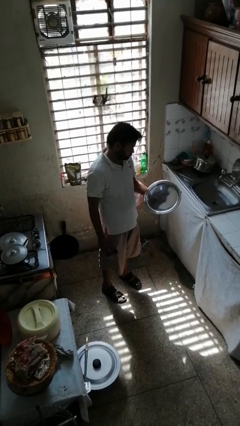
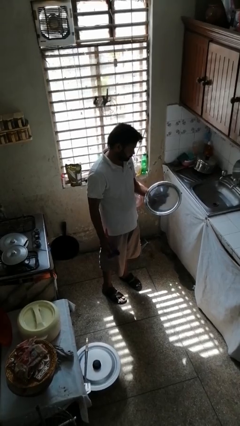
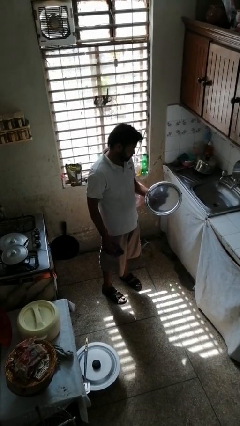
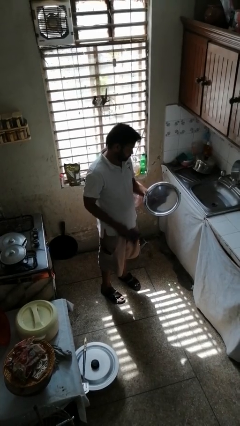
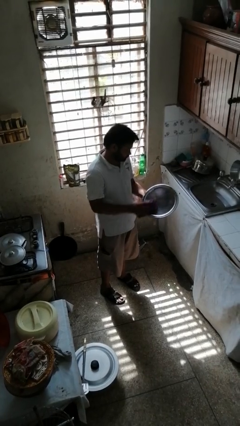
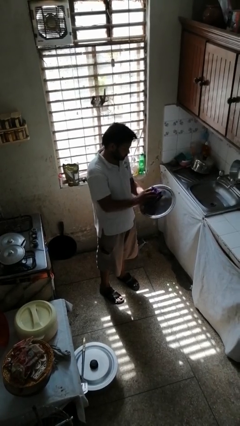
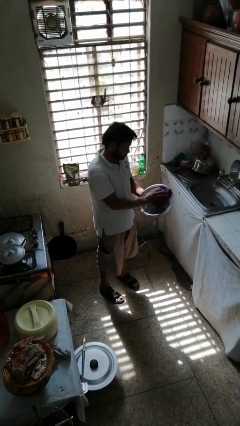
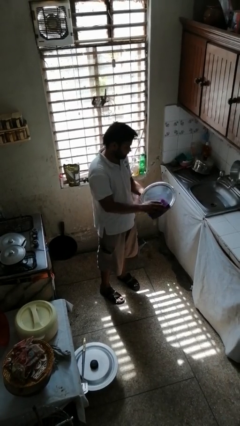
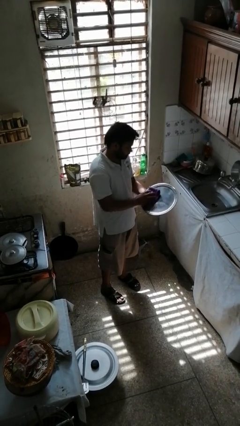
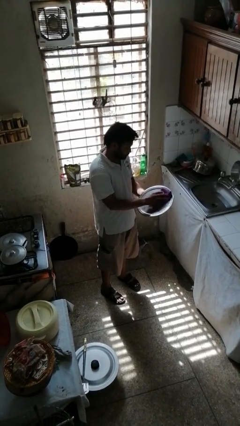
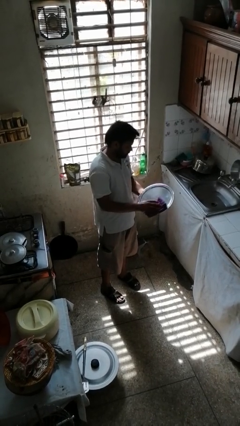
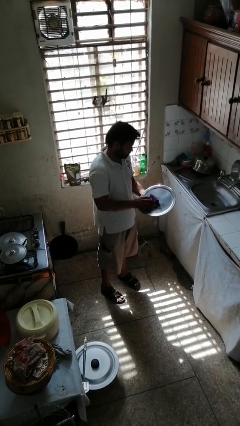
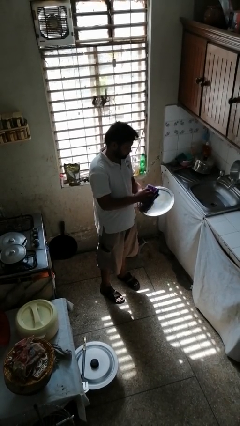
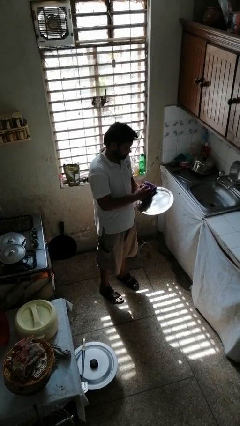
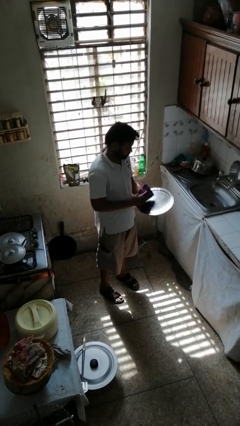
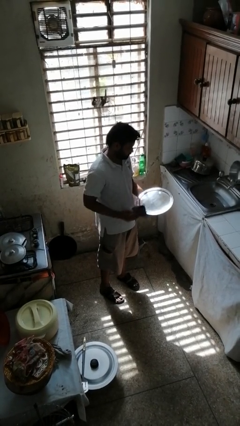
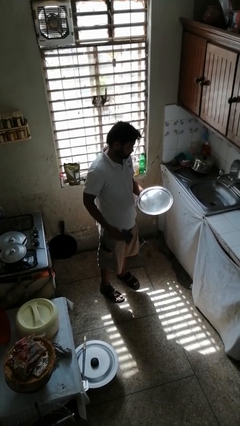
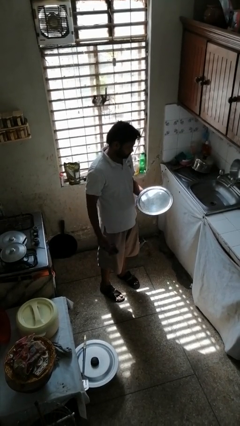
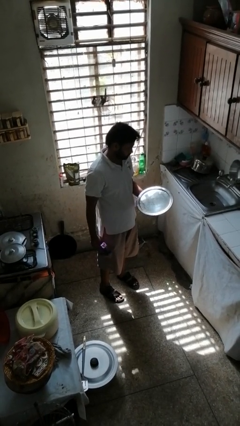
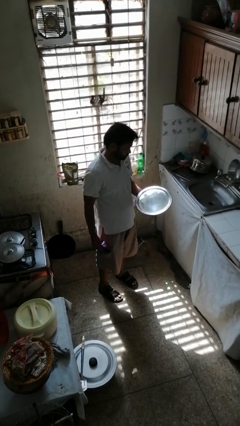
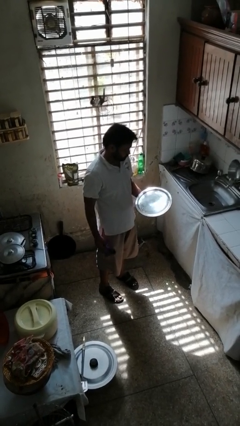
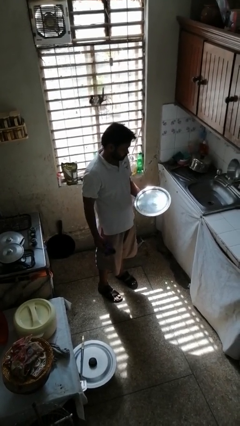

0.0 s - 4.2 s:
person dries dish

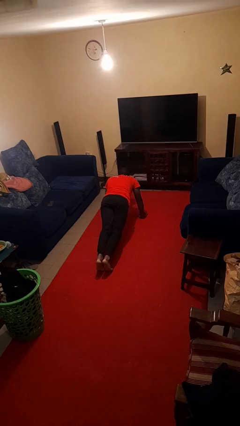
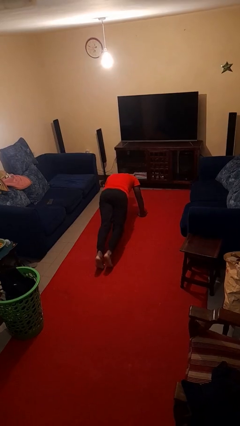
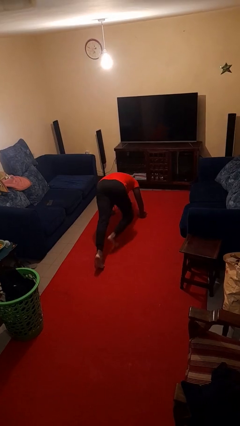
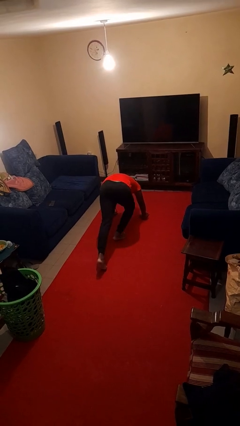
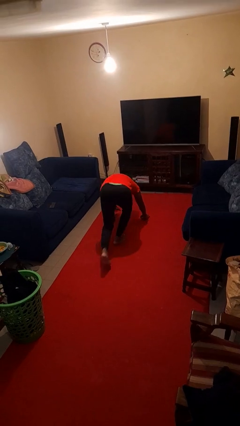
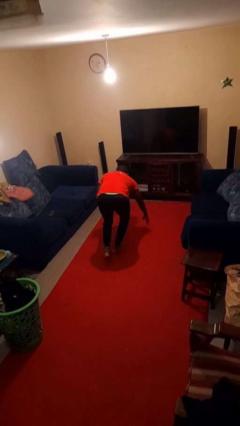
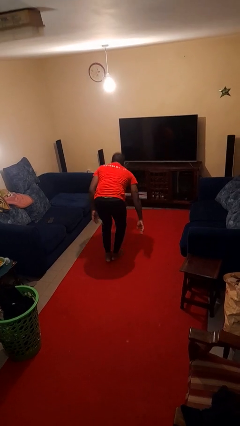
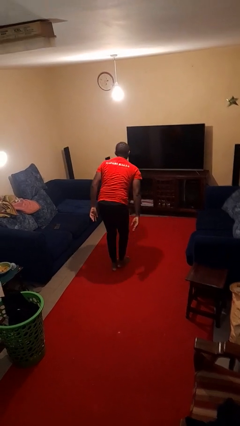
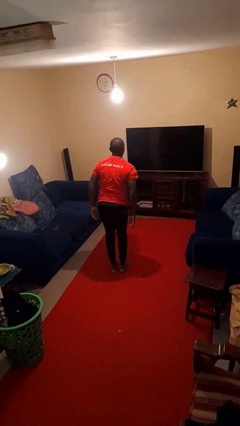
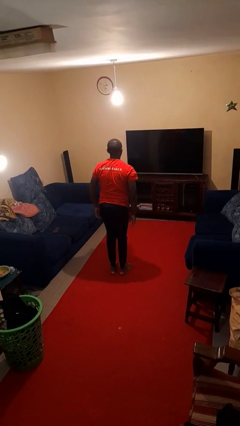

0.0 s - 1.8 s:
person stands up from floor

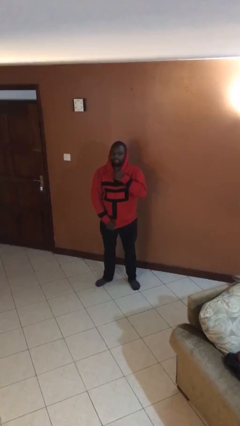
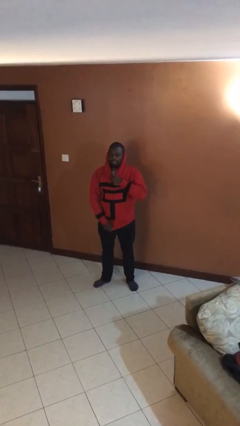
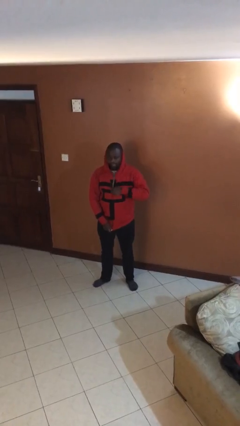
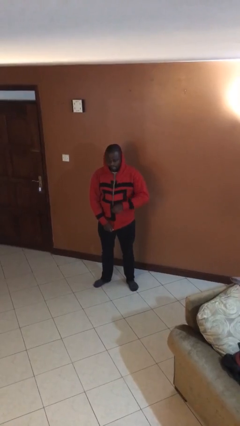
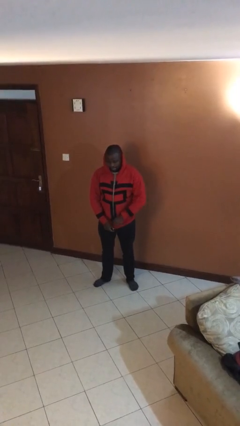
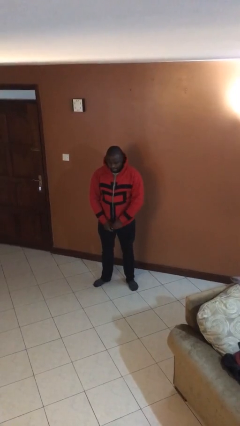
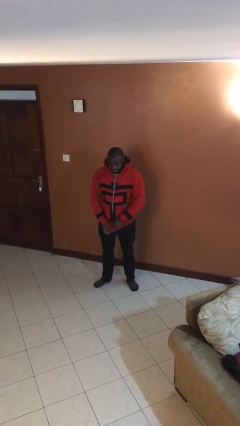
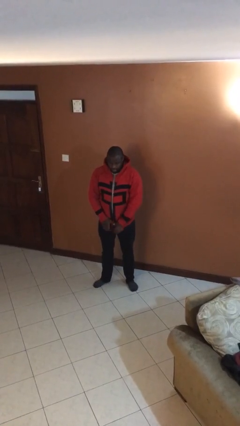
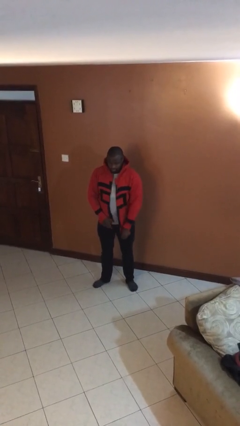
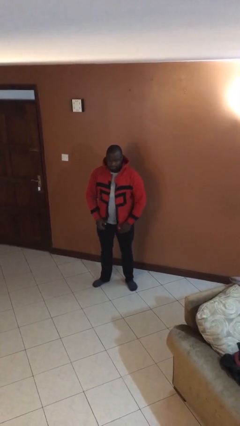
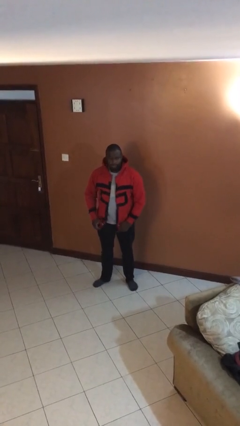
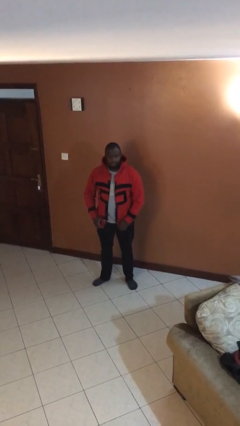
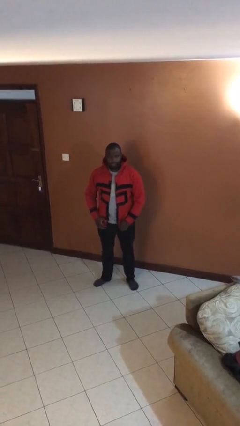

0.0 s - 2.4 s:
person unzips jacket

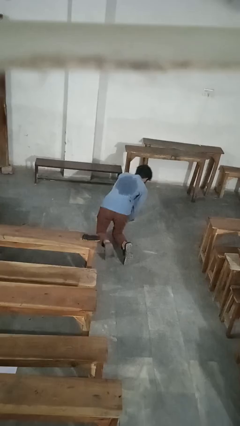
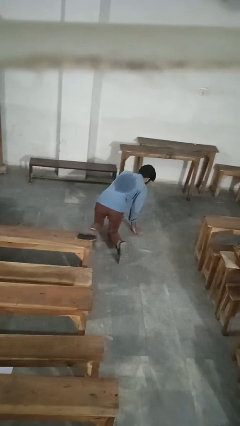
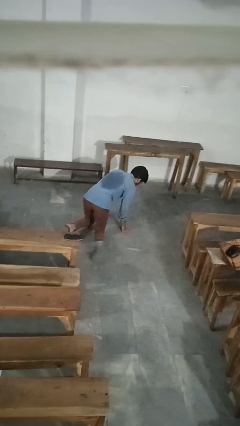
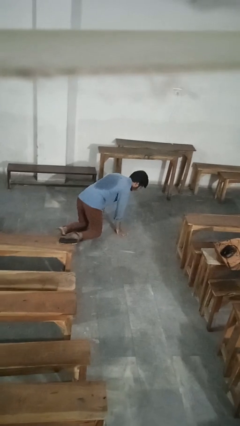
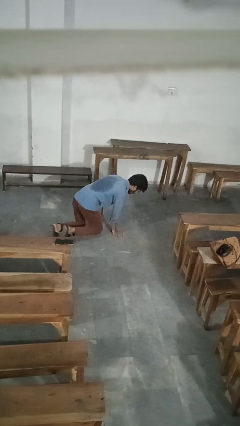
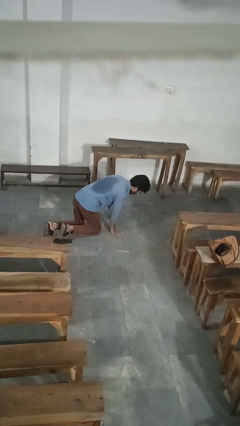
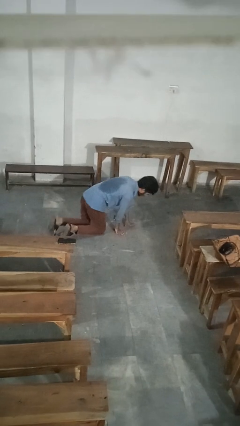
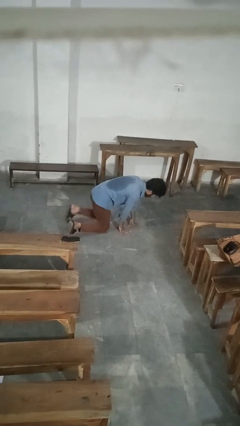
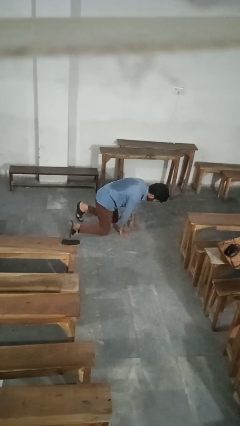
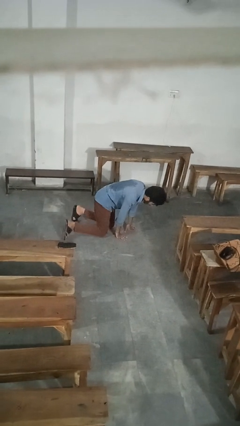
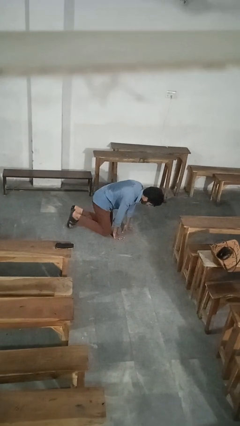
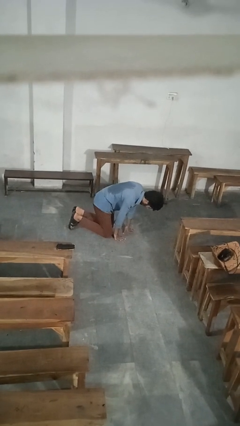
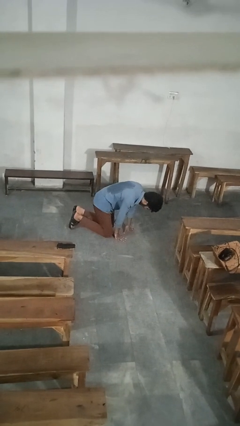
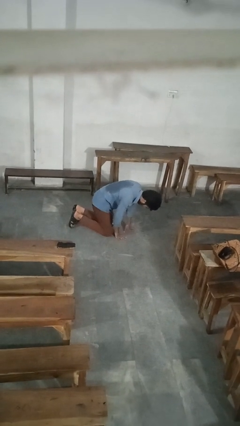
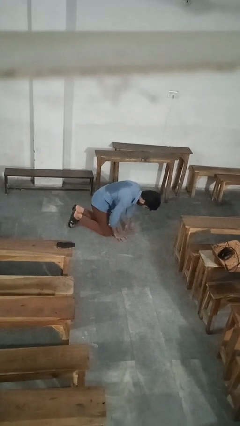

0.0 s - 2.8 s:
person crawls

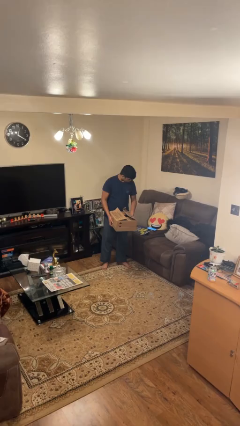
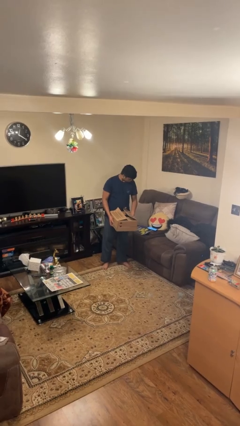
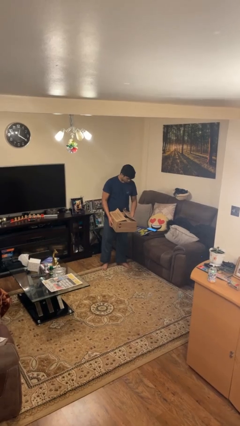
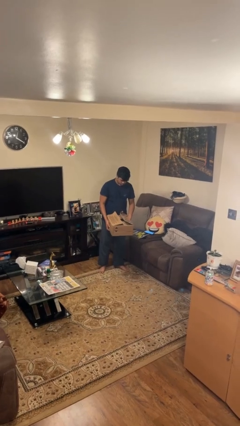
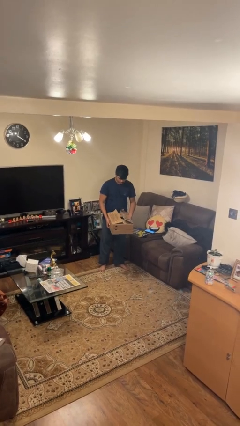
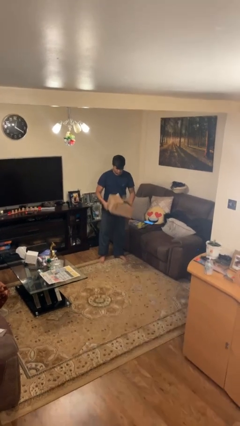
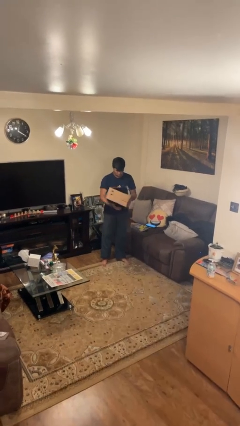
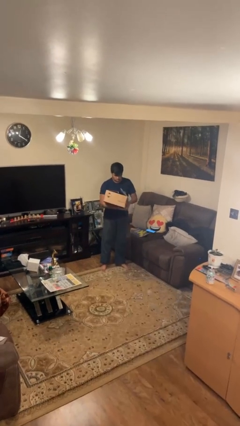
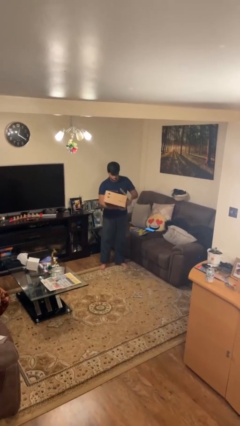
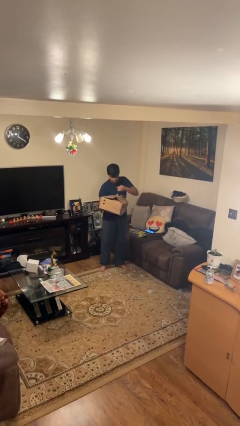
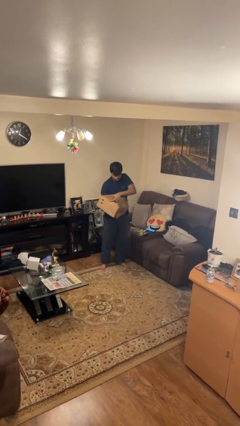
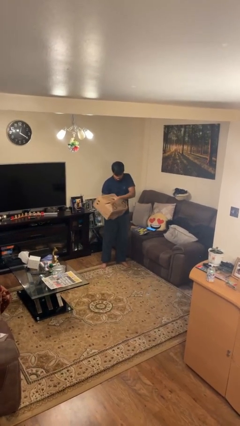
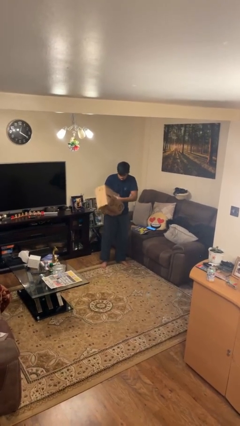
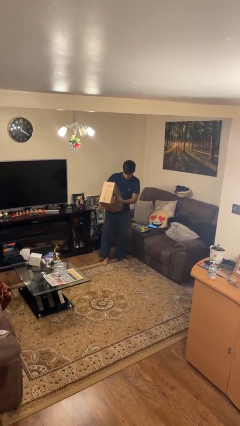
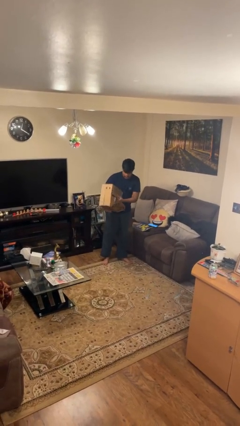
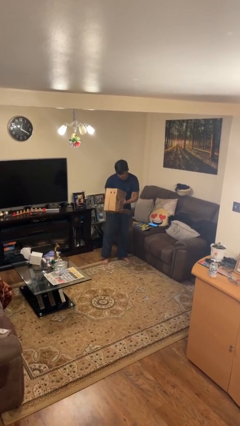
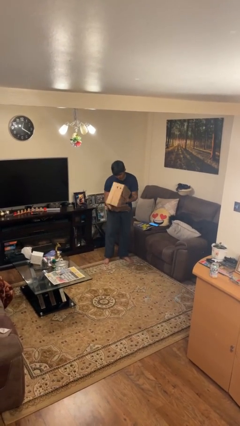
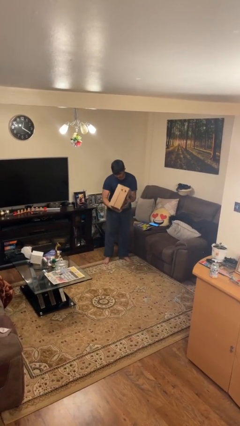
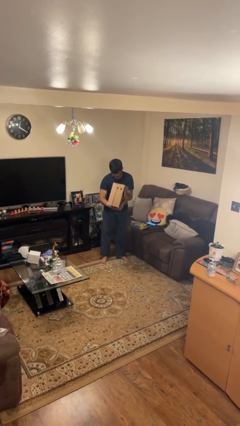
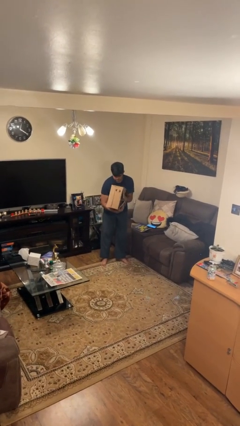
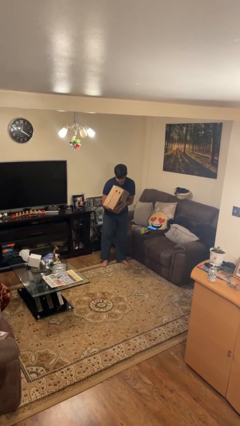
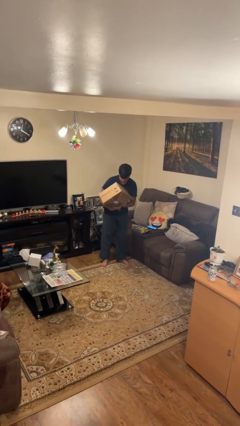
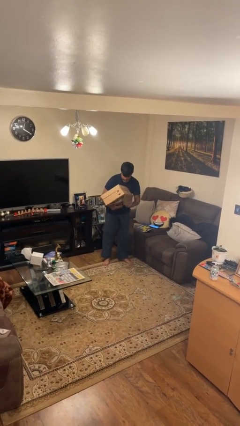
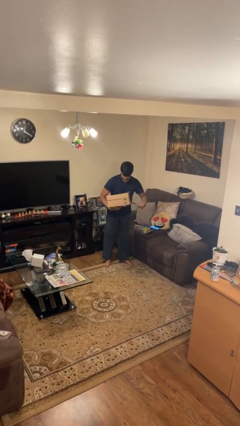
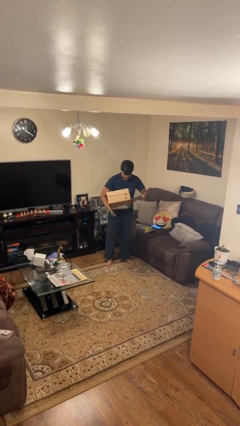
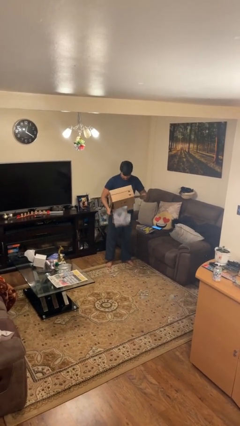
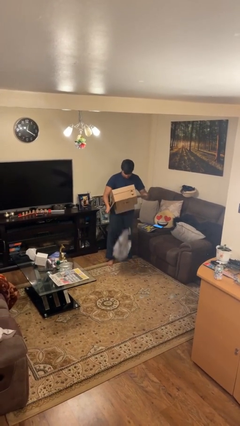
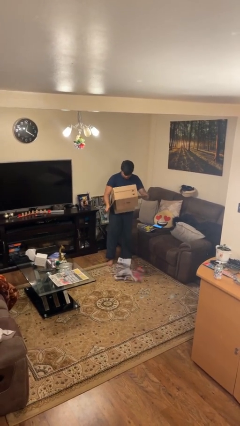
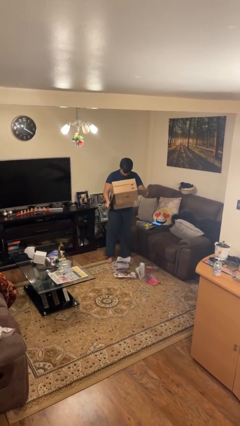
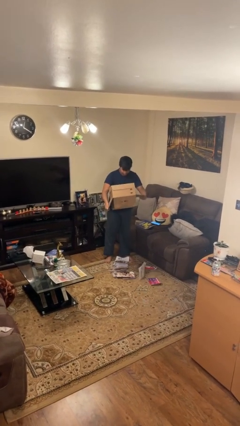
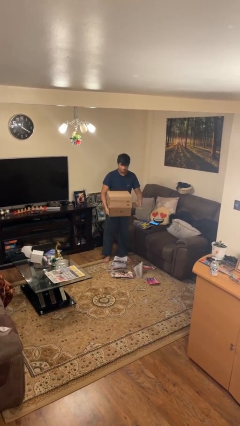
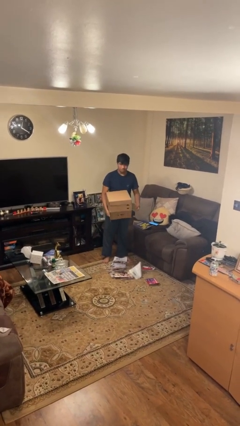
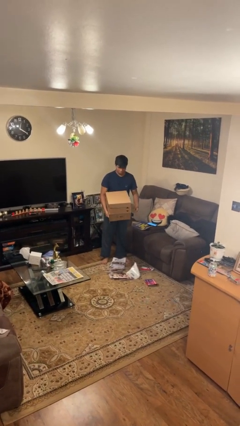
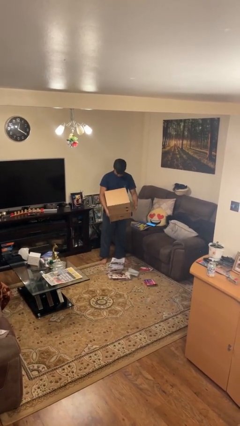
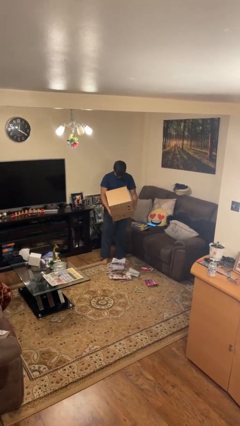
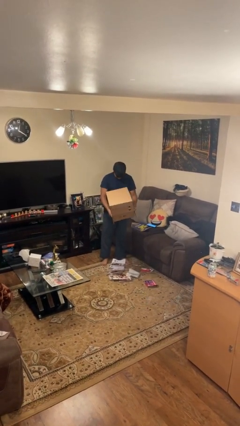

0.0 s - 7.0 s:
person unloads box onto floor
